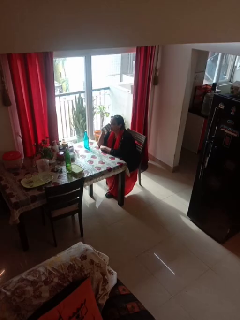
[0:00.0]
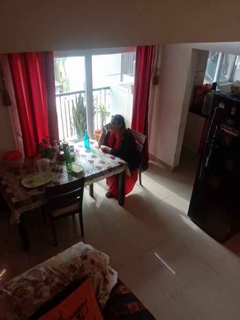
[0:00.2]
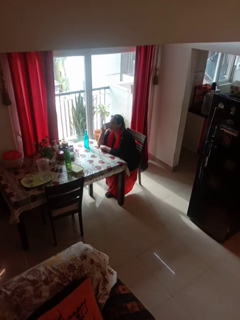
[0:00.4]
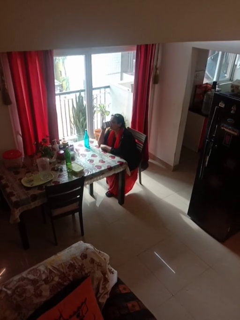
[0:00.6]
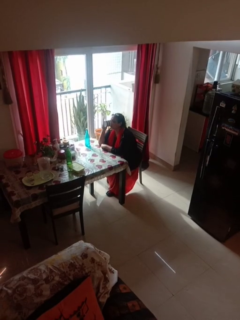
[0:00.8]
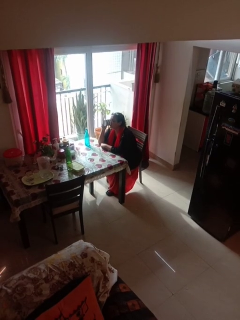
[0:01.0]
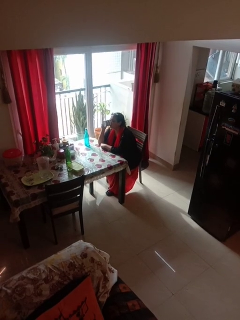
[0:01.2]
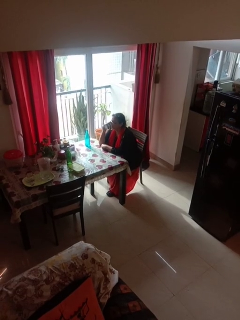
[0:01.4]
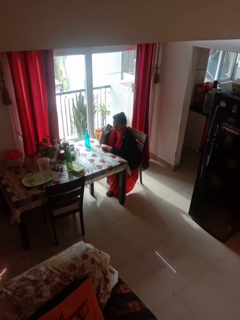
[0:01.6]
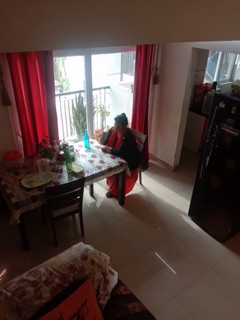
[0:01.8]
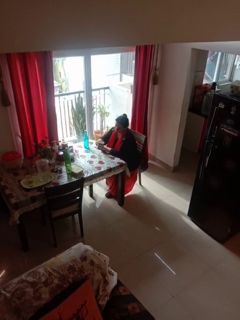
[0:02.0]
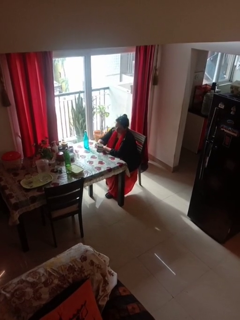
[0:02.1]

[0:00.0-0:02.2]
person drinks from mug

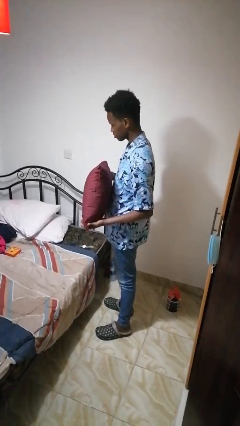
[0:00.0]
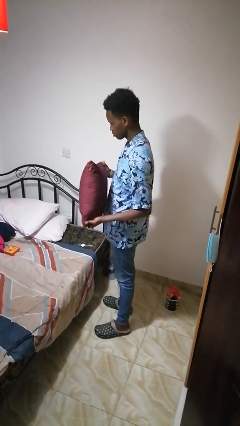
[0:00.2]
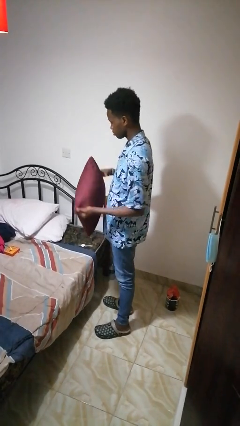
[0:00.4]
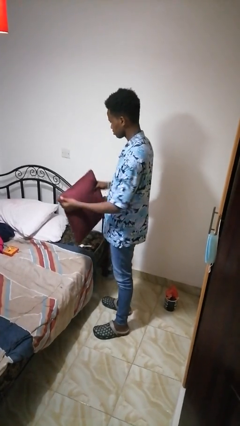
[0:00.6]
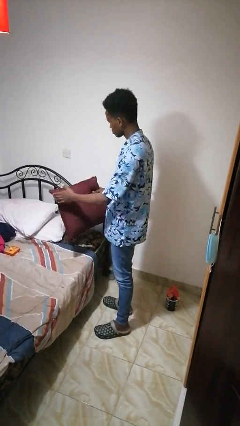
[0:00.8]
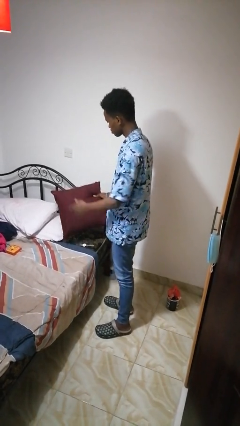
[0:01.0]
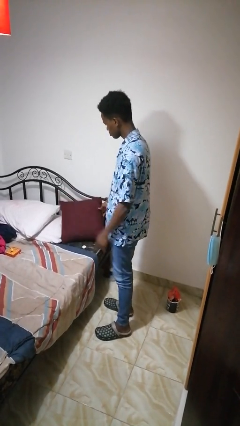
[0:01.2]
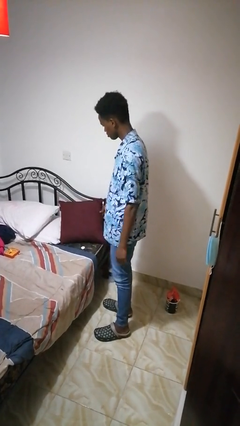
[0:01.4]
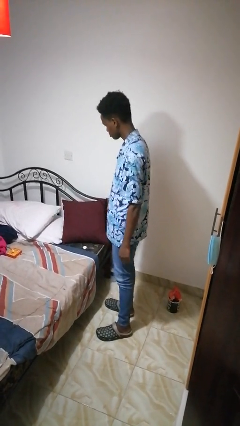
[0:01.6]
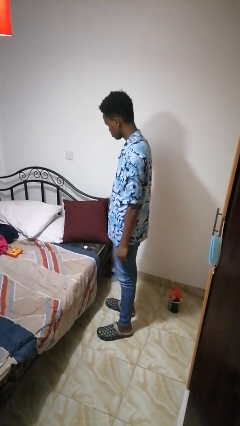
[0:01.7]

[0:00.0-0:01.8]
person puts down object on bed

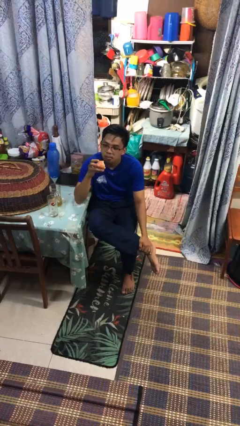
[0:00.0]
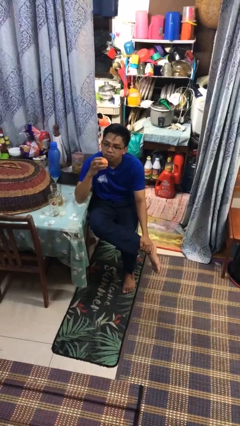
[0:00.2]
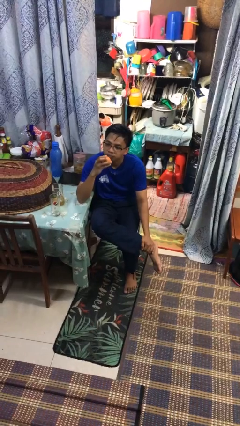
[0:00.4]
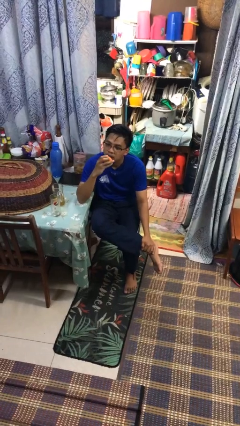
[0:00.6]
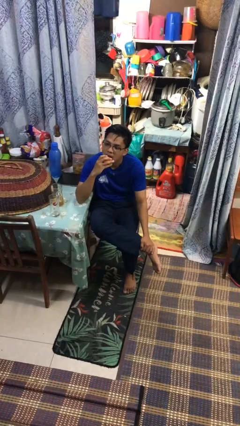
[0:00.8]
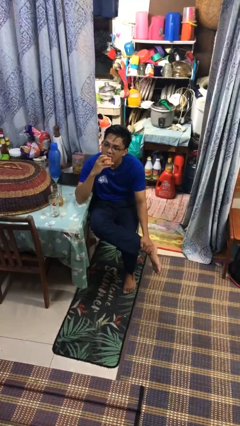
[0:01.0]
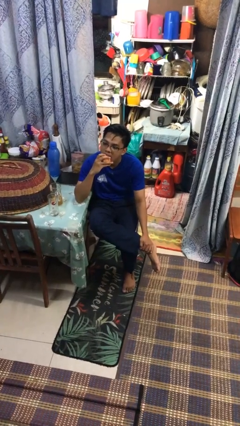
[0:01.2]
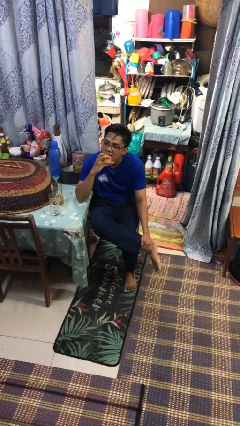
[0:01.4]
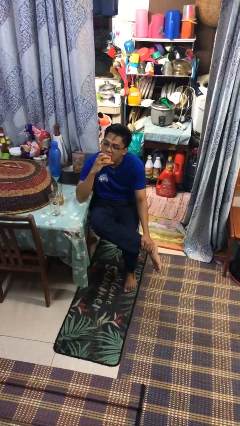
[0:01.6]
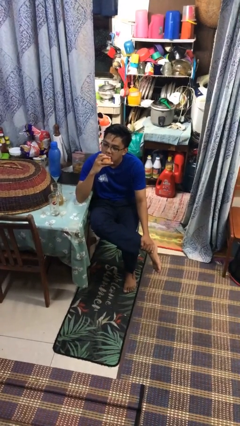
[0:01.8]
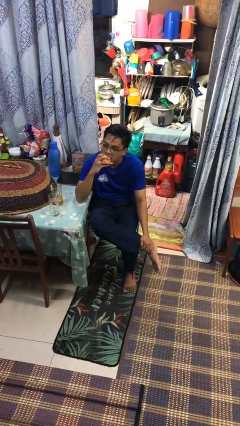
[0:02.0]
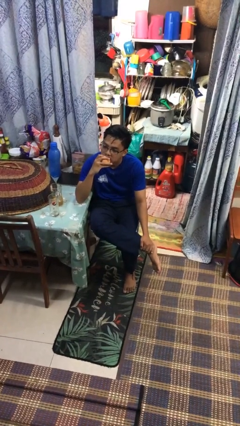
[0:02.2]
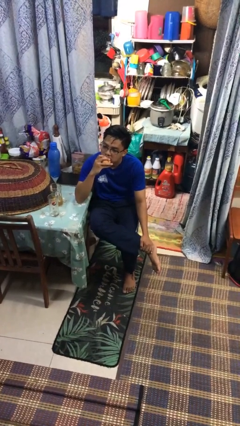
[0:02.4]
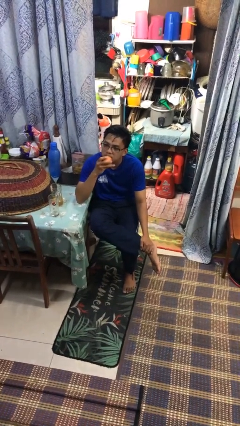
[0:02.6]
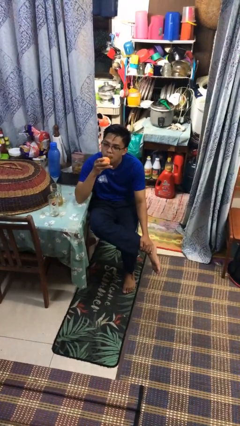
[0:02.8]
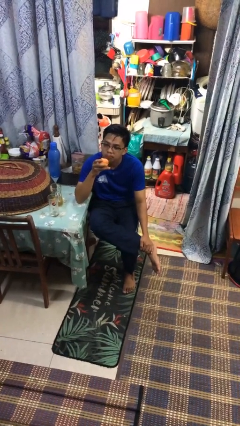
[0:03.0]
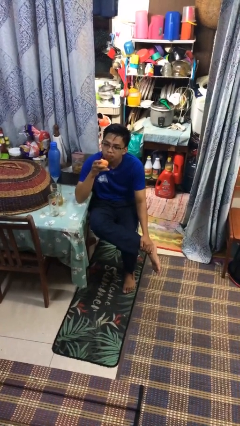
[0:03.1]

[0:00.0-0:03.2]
person eats apple

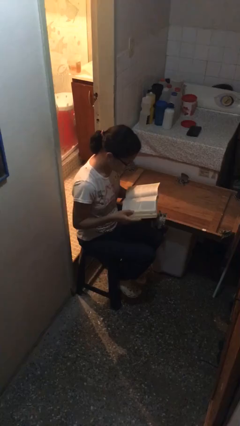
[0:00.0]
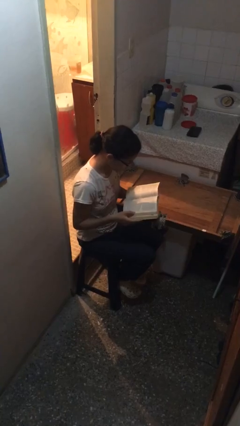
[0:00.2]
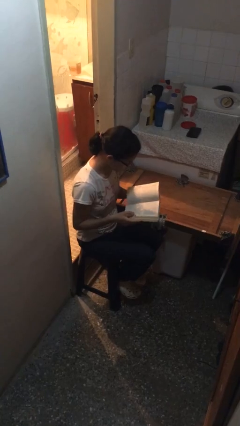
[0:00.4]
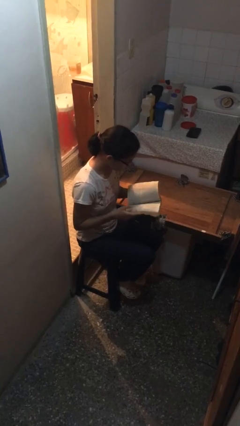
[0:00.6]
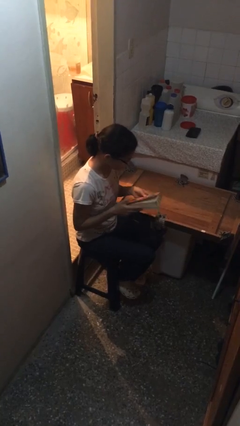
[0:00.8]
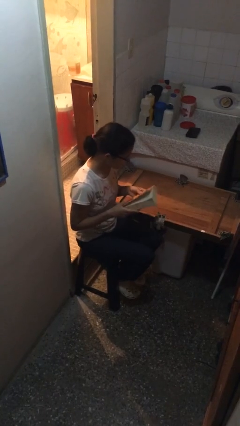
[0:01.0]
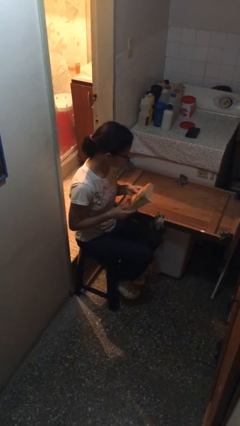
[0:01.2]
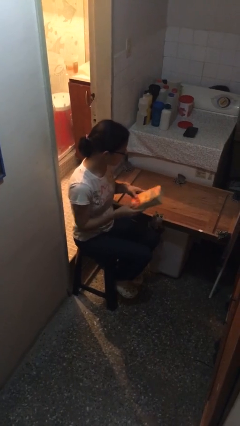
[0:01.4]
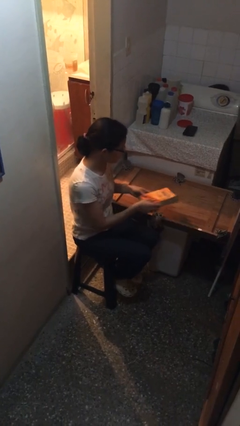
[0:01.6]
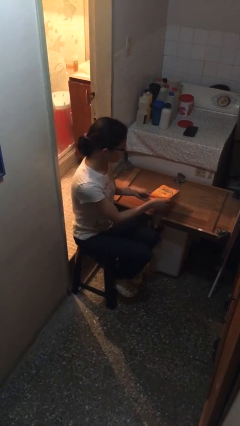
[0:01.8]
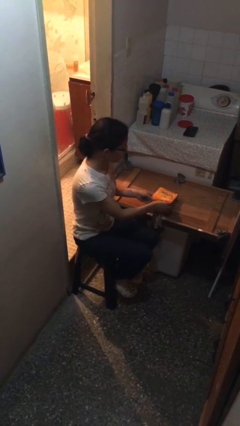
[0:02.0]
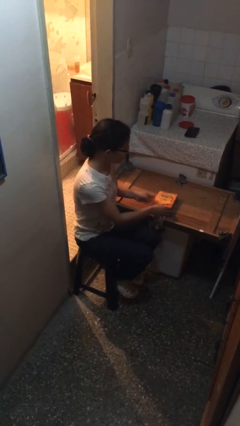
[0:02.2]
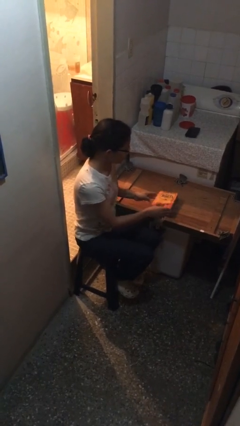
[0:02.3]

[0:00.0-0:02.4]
person puts down object on table

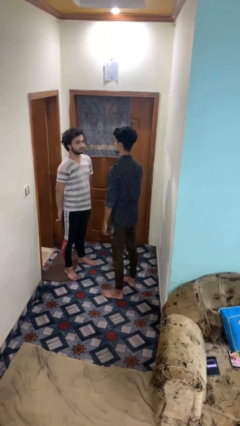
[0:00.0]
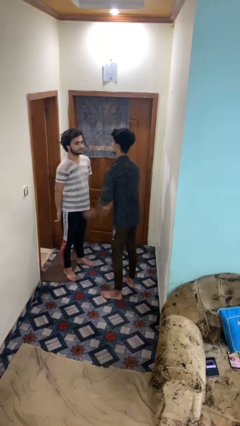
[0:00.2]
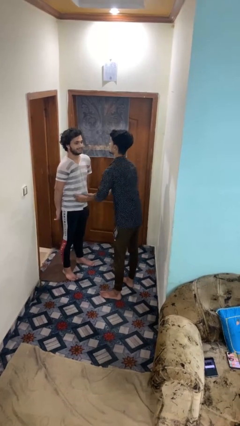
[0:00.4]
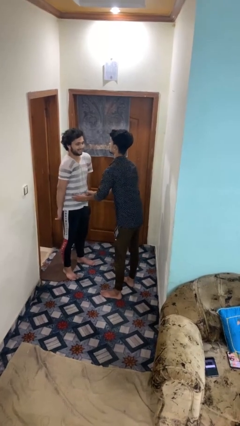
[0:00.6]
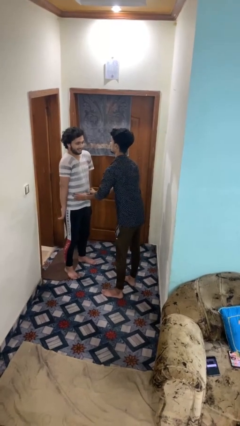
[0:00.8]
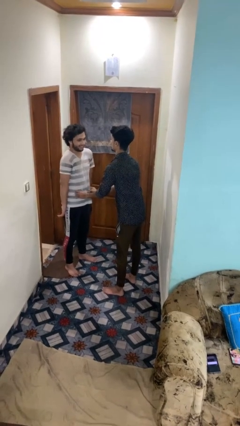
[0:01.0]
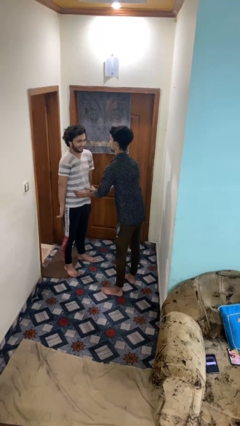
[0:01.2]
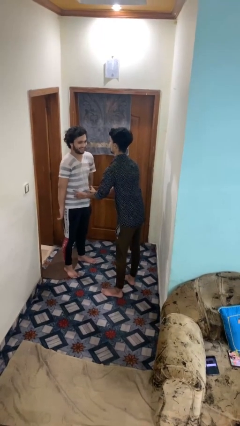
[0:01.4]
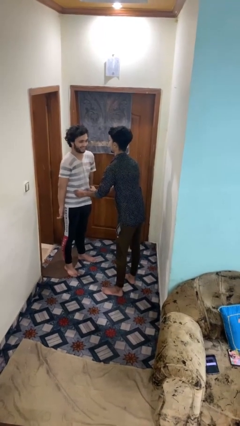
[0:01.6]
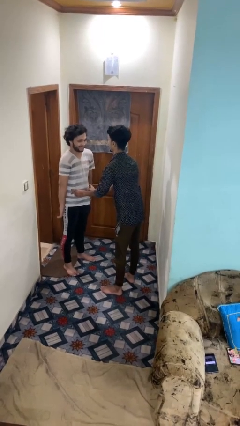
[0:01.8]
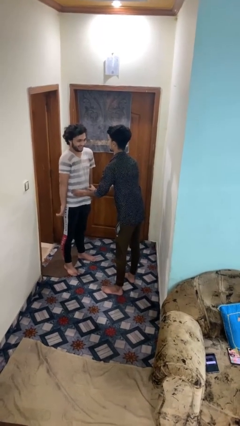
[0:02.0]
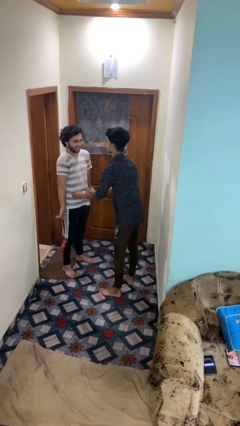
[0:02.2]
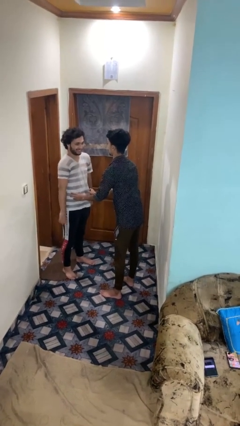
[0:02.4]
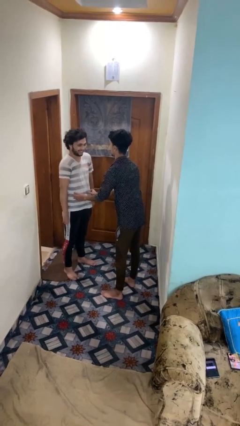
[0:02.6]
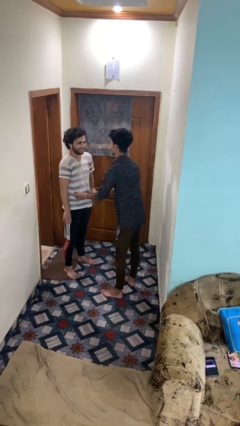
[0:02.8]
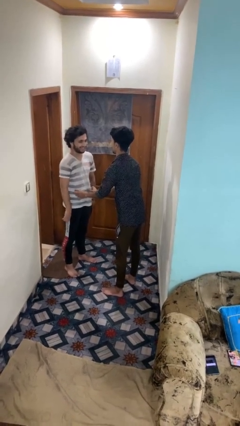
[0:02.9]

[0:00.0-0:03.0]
person tickles person

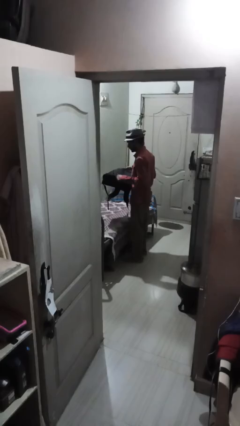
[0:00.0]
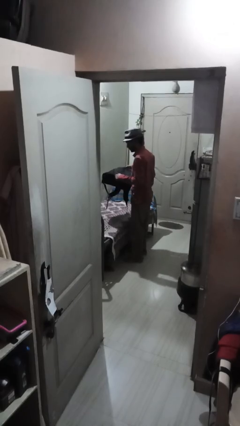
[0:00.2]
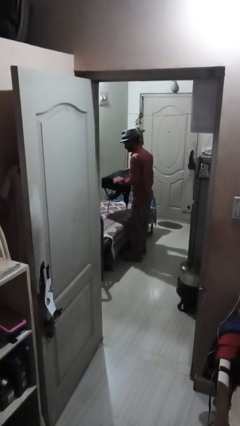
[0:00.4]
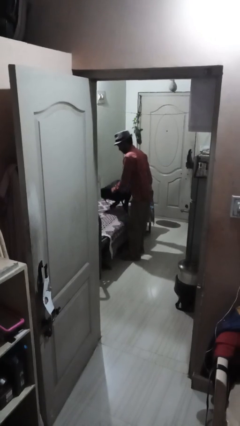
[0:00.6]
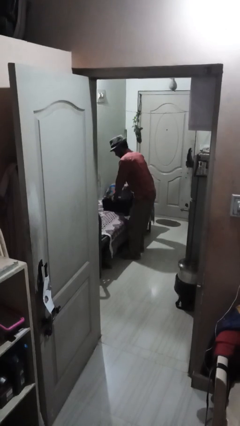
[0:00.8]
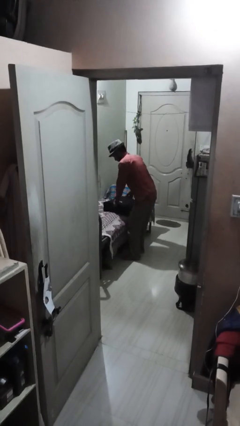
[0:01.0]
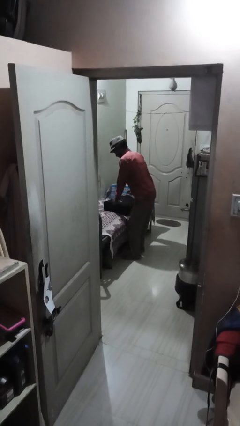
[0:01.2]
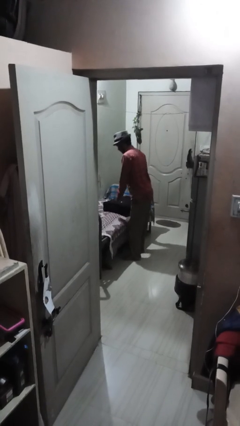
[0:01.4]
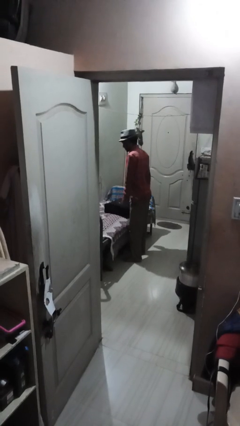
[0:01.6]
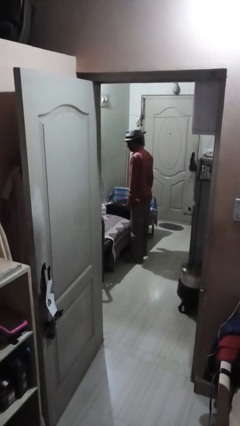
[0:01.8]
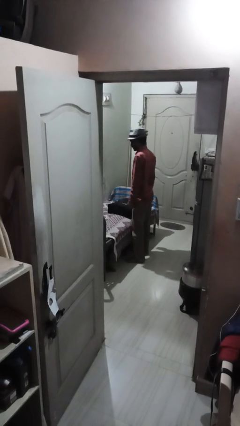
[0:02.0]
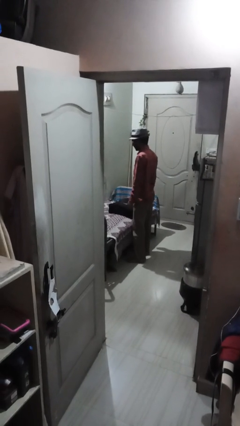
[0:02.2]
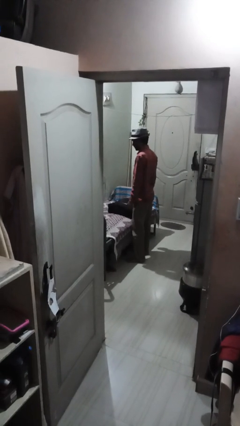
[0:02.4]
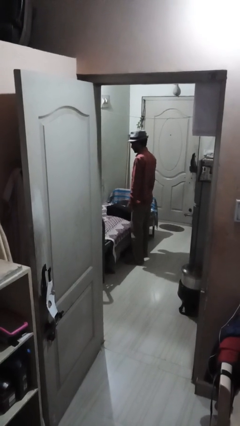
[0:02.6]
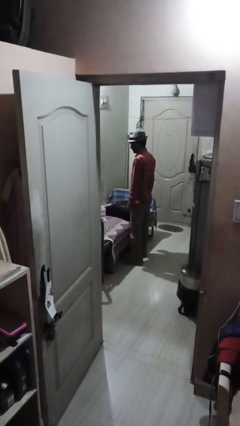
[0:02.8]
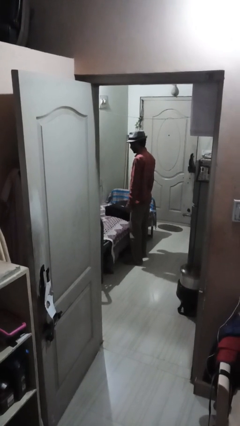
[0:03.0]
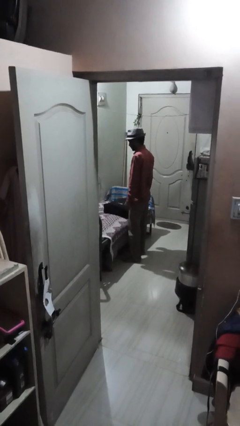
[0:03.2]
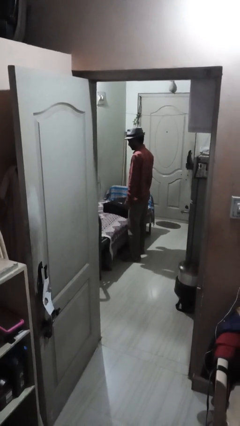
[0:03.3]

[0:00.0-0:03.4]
person puts down object on couch

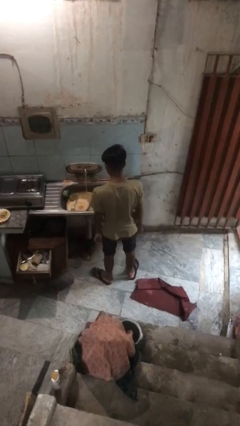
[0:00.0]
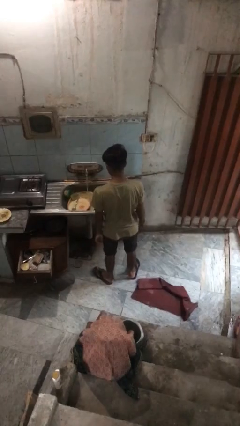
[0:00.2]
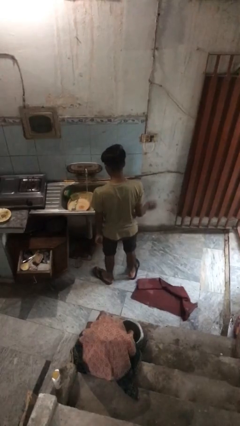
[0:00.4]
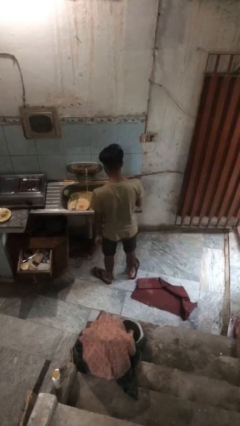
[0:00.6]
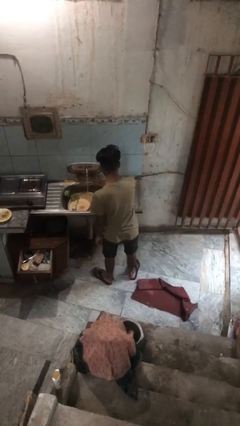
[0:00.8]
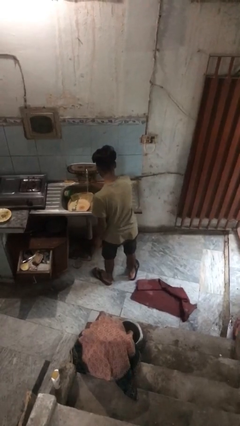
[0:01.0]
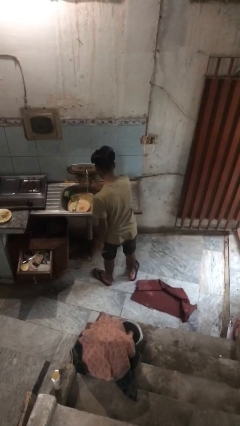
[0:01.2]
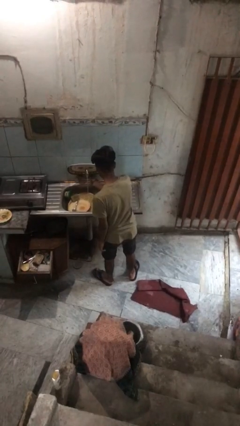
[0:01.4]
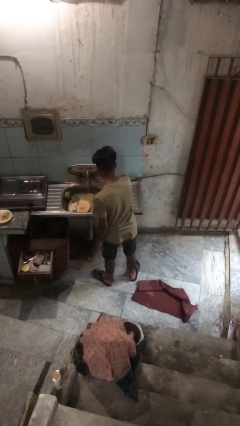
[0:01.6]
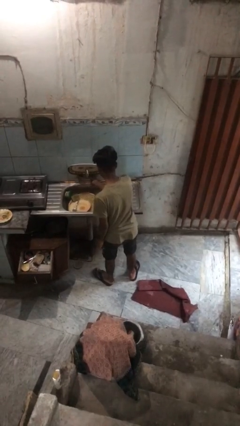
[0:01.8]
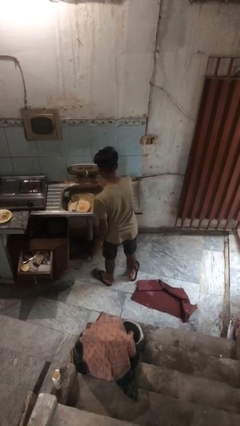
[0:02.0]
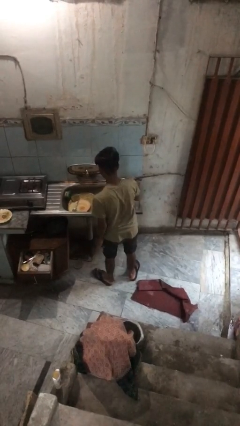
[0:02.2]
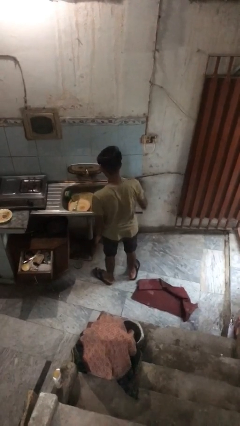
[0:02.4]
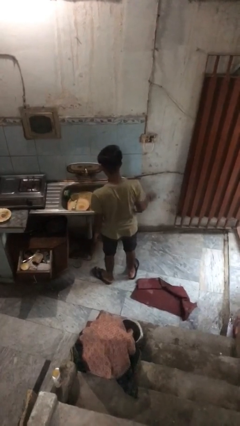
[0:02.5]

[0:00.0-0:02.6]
person turns off faucet
